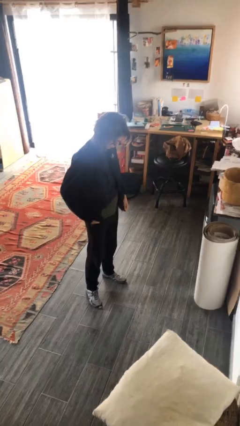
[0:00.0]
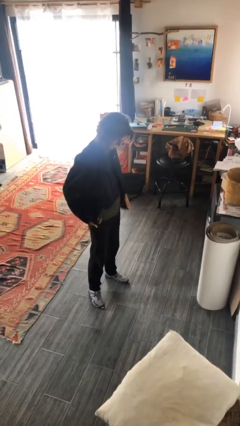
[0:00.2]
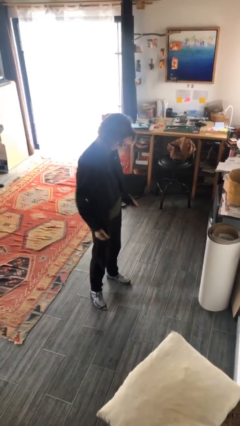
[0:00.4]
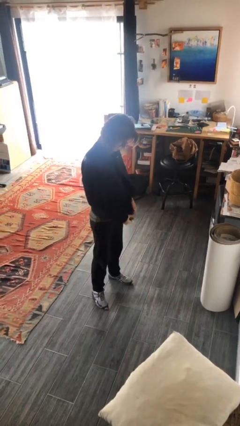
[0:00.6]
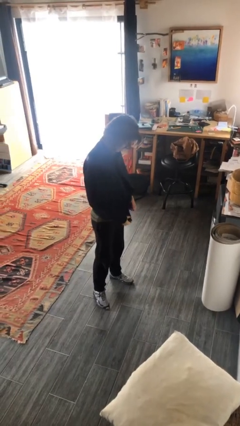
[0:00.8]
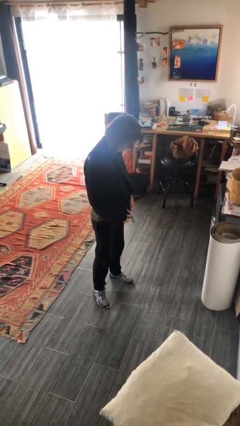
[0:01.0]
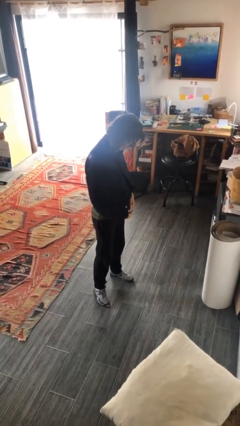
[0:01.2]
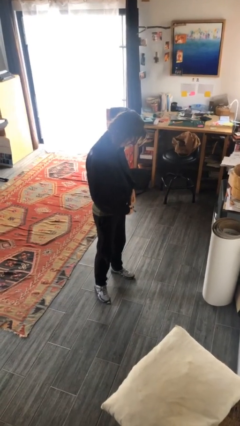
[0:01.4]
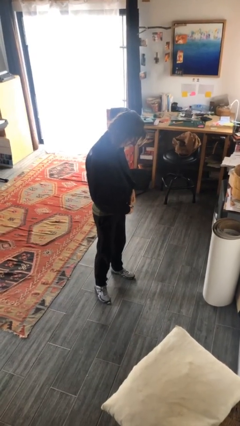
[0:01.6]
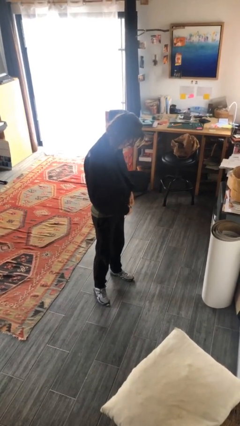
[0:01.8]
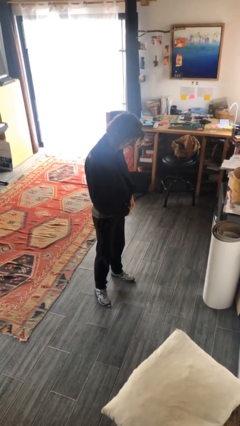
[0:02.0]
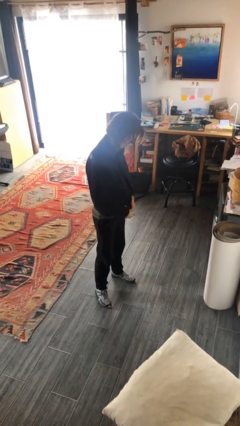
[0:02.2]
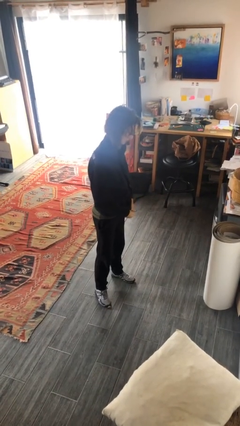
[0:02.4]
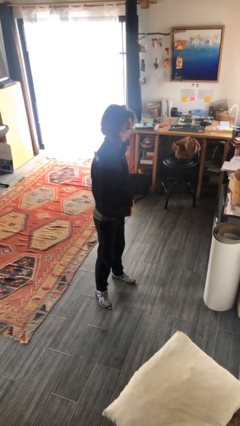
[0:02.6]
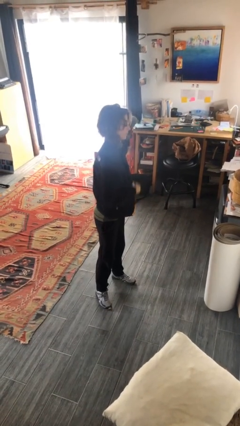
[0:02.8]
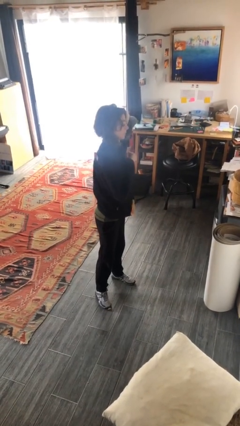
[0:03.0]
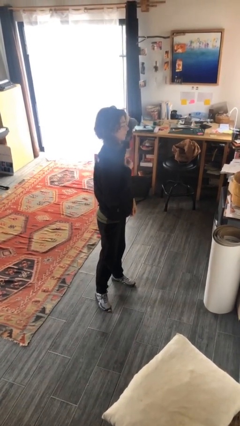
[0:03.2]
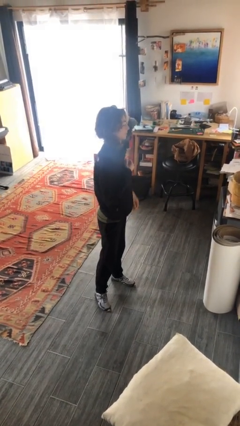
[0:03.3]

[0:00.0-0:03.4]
person zips up jacket

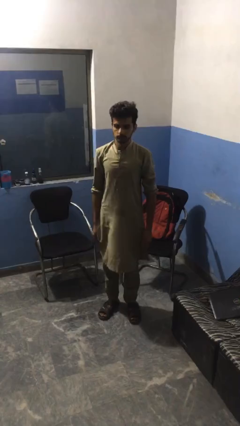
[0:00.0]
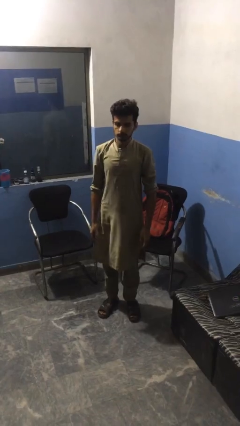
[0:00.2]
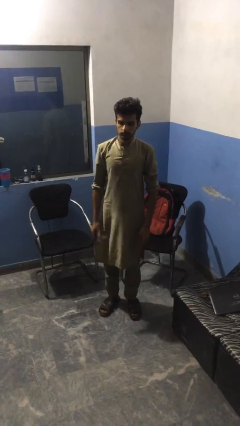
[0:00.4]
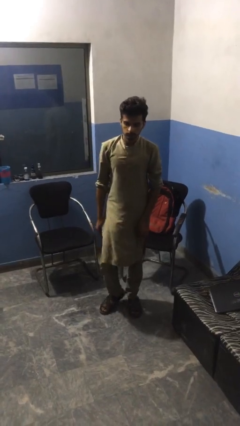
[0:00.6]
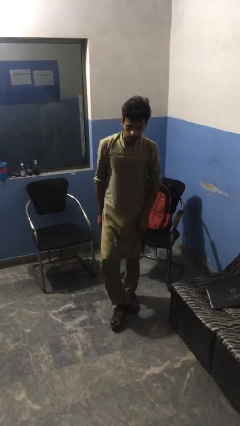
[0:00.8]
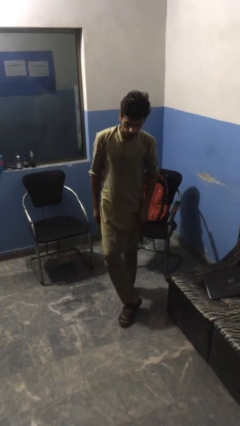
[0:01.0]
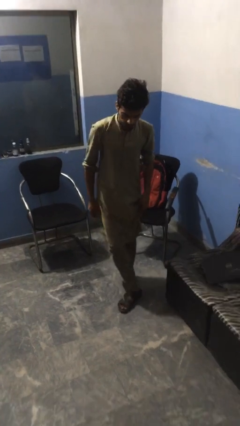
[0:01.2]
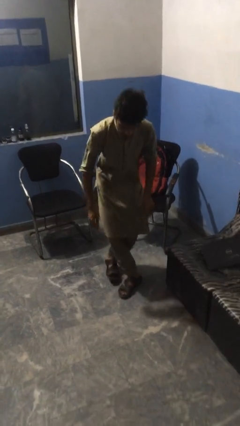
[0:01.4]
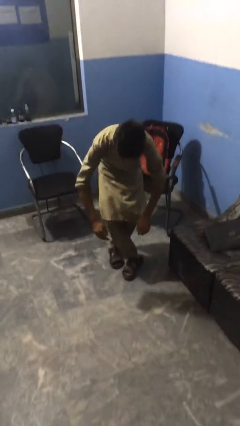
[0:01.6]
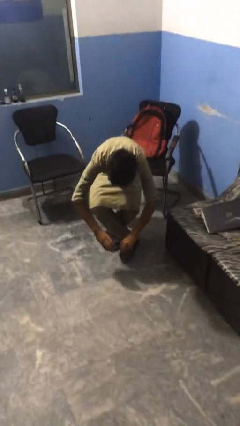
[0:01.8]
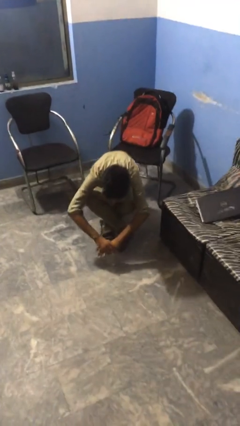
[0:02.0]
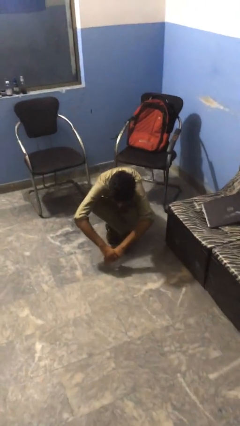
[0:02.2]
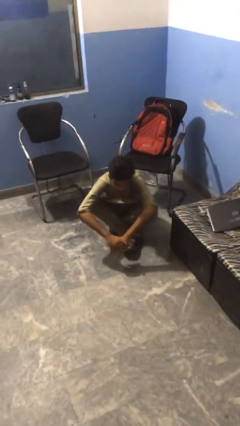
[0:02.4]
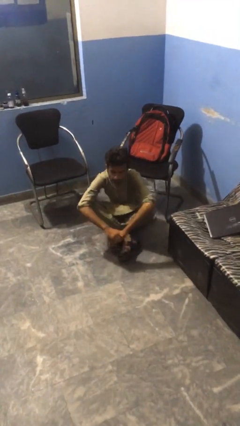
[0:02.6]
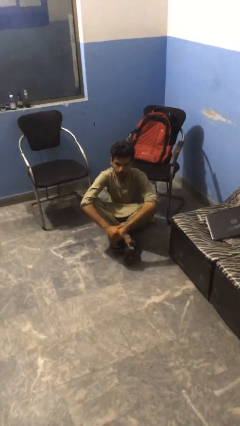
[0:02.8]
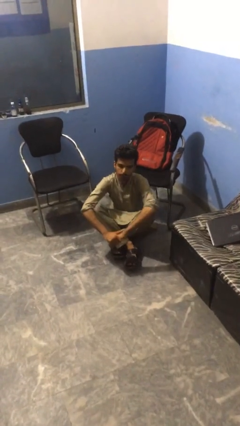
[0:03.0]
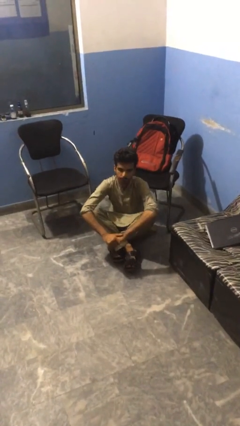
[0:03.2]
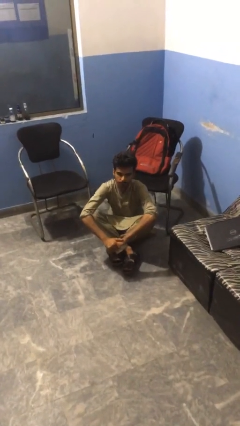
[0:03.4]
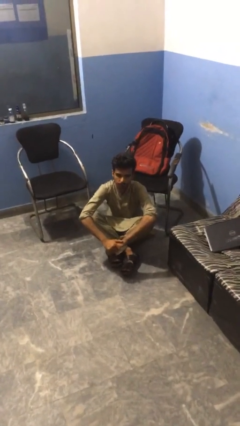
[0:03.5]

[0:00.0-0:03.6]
person sits crisscross

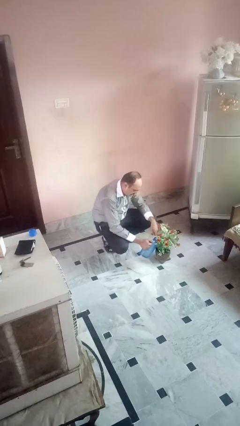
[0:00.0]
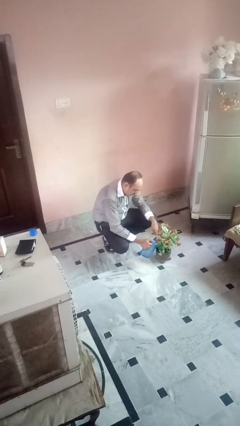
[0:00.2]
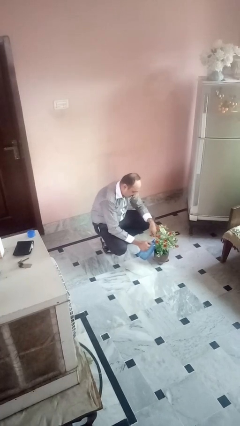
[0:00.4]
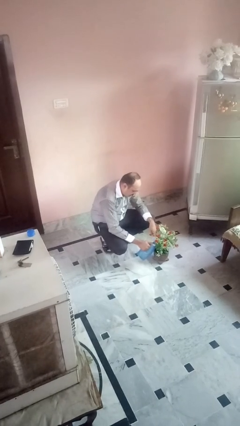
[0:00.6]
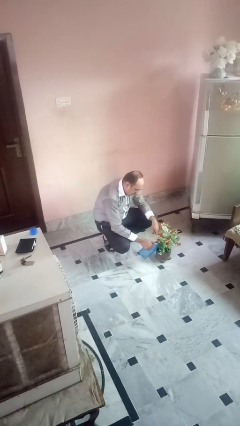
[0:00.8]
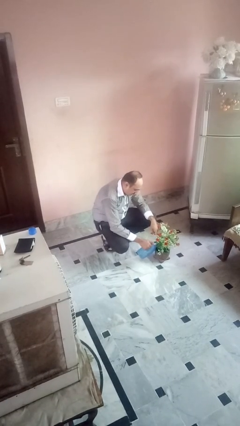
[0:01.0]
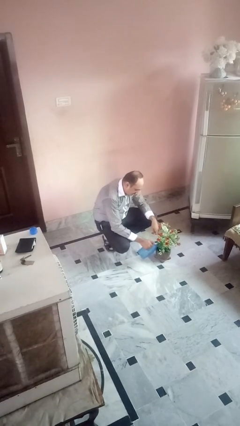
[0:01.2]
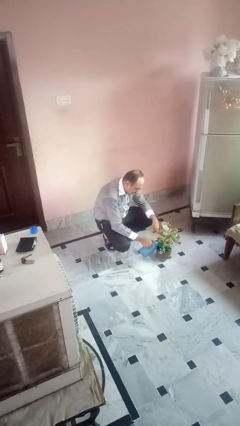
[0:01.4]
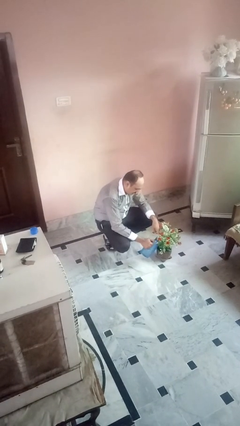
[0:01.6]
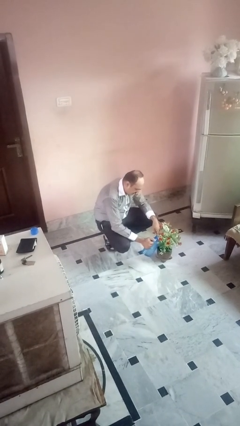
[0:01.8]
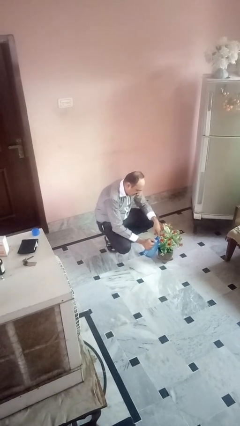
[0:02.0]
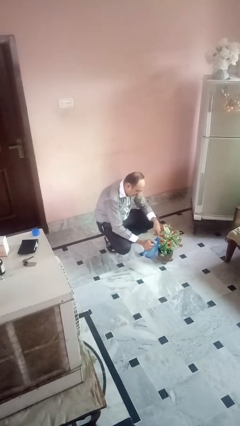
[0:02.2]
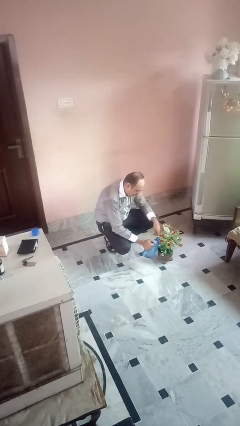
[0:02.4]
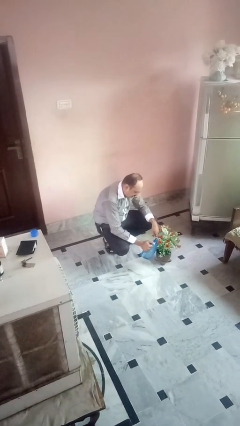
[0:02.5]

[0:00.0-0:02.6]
person waters houseplant

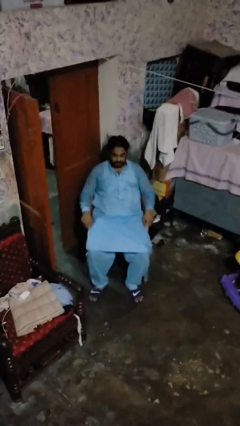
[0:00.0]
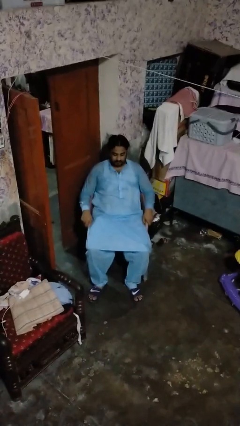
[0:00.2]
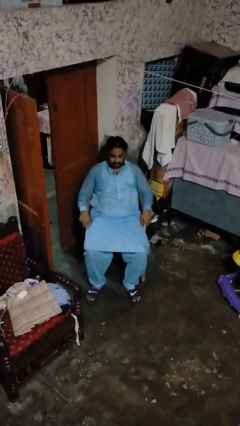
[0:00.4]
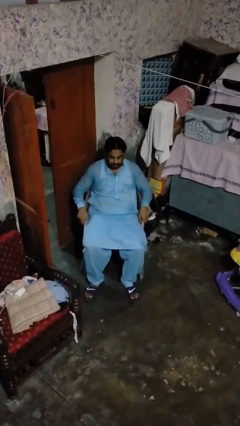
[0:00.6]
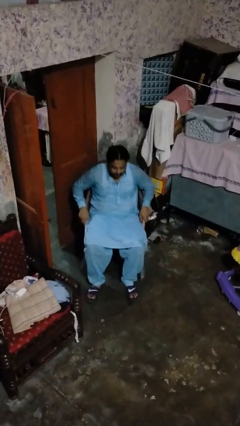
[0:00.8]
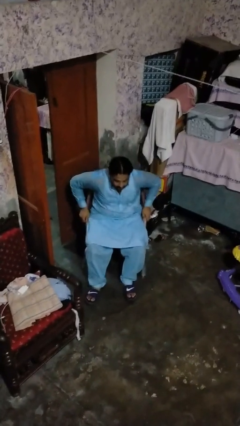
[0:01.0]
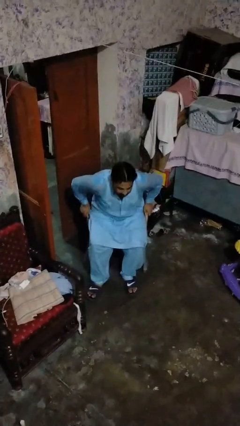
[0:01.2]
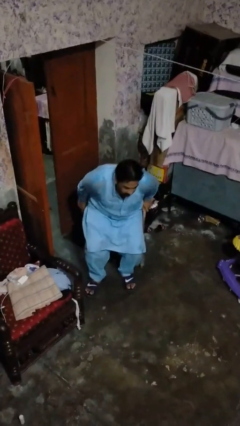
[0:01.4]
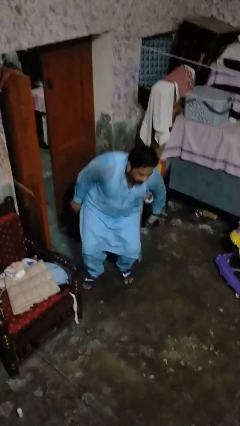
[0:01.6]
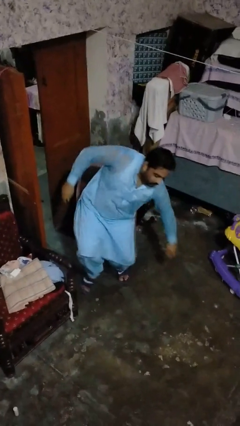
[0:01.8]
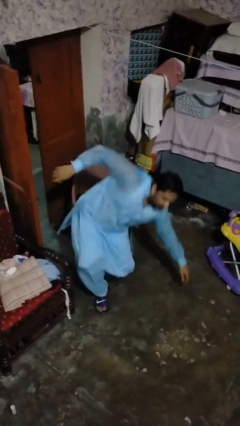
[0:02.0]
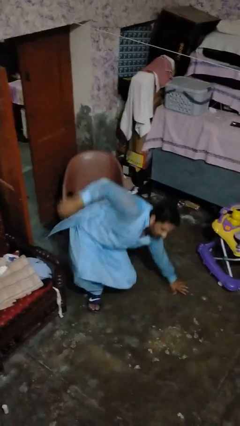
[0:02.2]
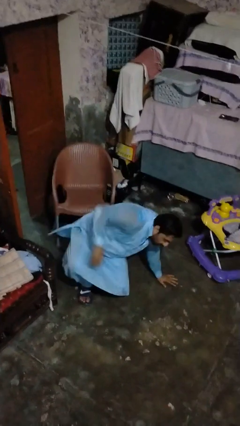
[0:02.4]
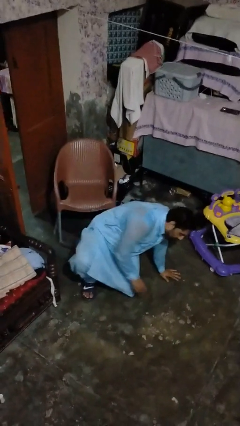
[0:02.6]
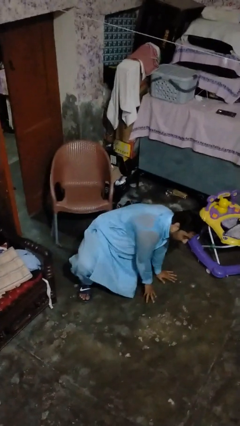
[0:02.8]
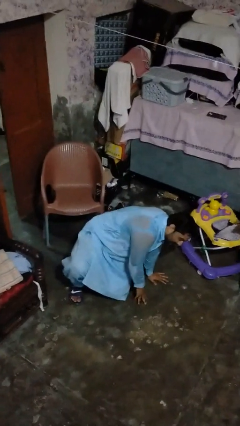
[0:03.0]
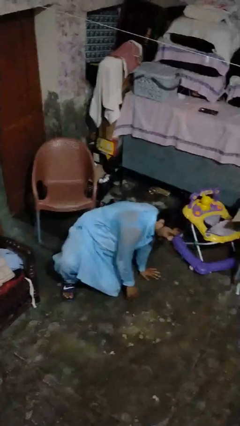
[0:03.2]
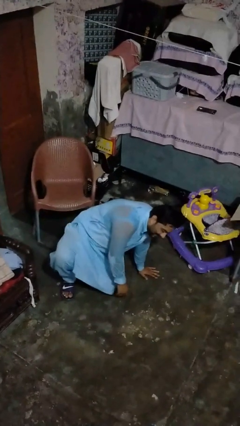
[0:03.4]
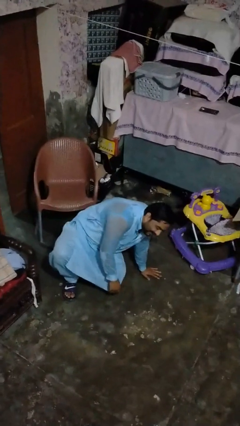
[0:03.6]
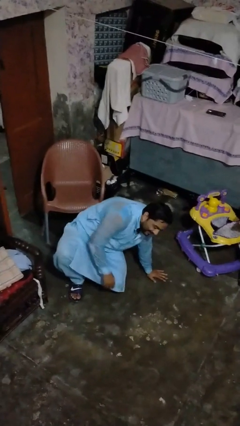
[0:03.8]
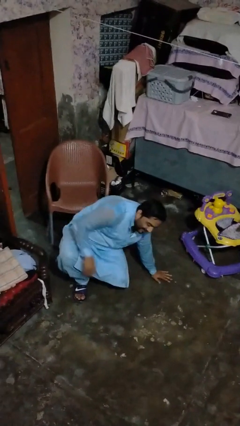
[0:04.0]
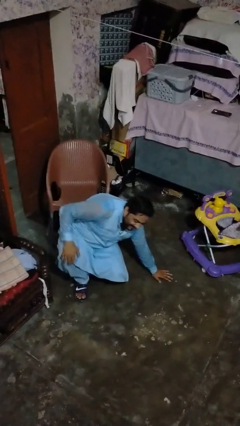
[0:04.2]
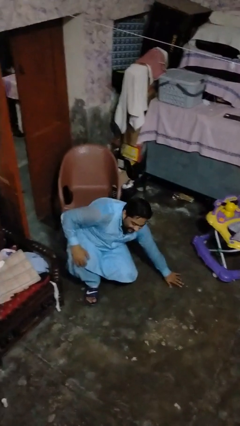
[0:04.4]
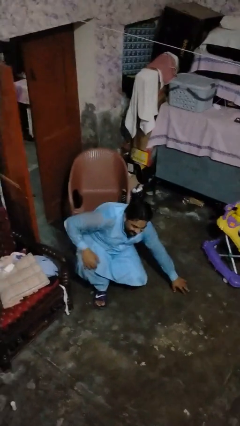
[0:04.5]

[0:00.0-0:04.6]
person falls from chair

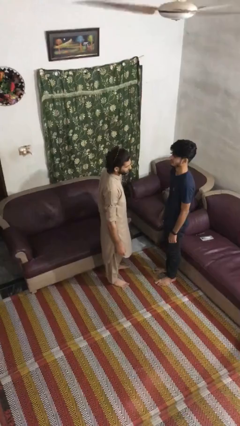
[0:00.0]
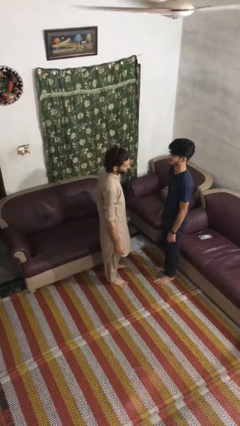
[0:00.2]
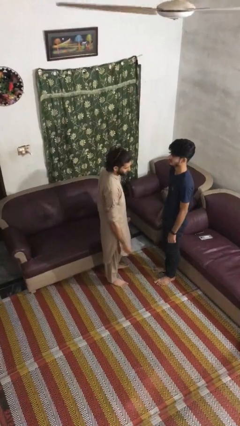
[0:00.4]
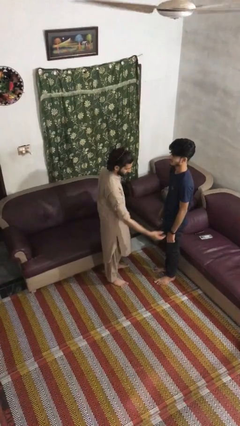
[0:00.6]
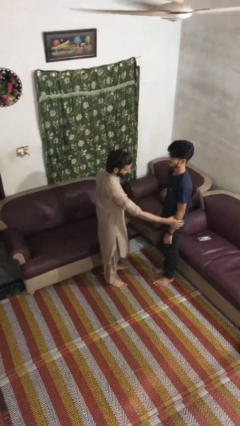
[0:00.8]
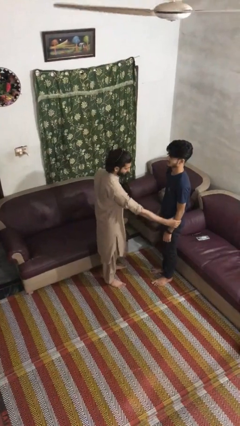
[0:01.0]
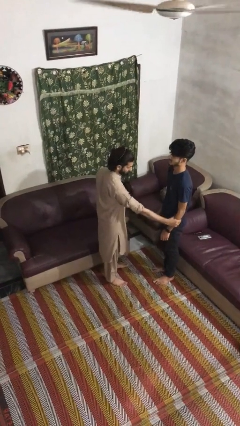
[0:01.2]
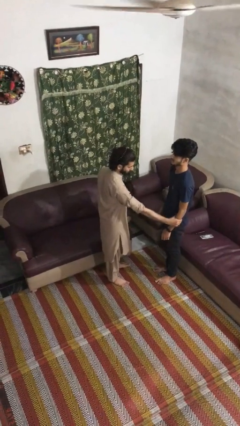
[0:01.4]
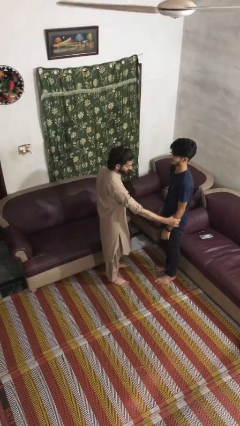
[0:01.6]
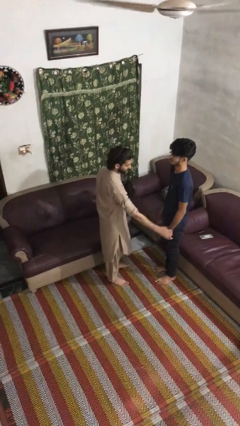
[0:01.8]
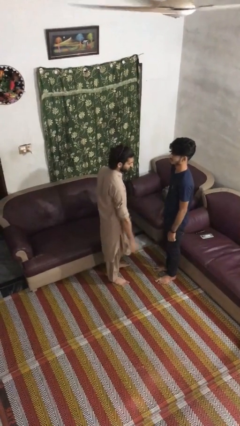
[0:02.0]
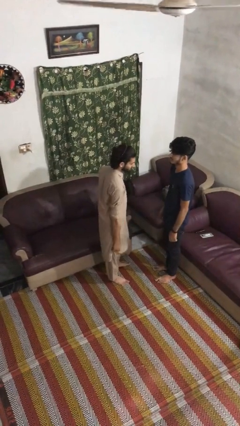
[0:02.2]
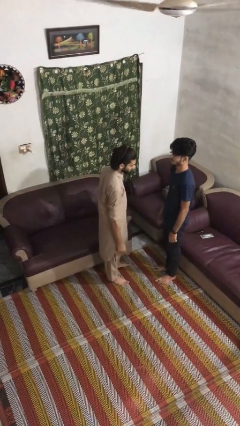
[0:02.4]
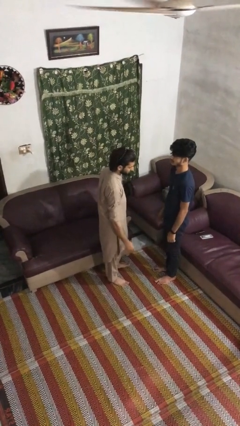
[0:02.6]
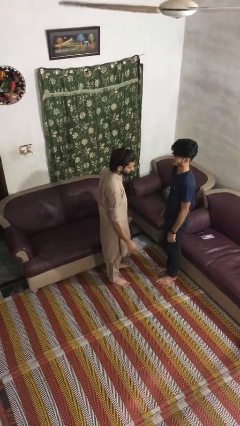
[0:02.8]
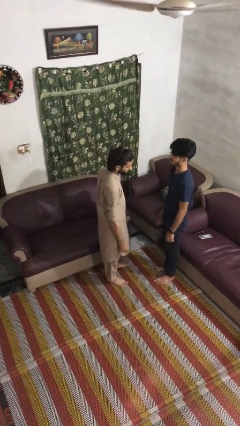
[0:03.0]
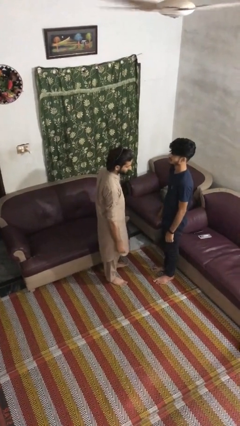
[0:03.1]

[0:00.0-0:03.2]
person grabs person by forearm
